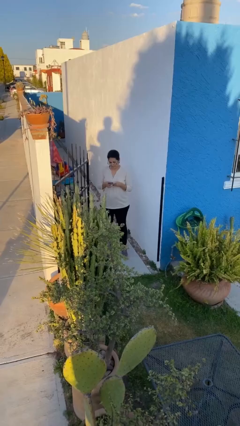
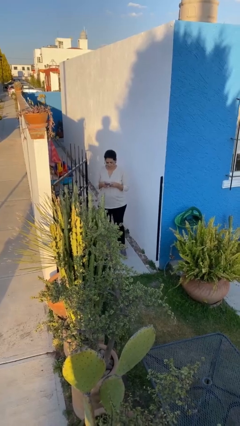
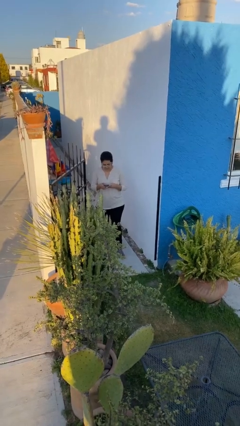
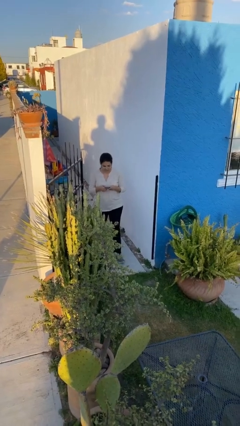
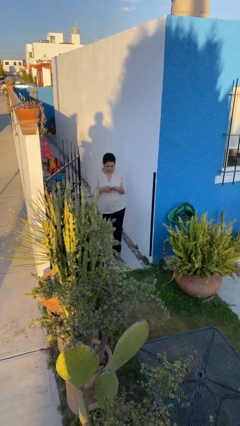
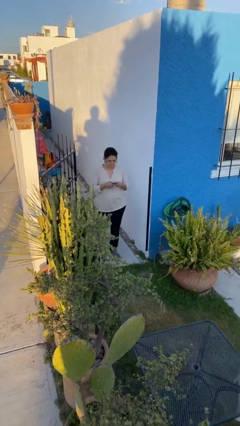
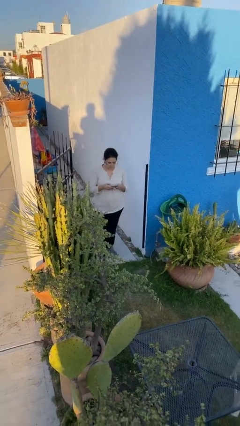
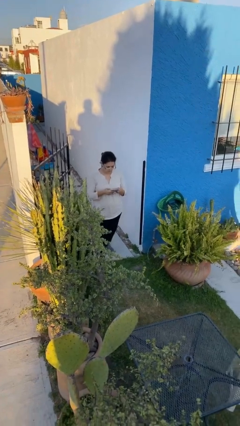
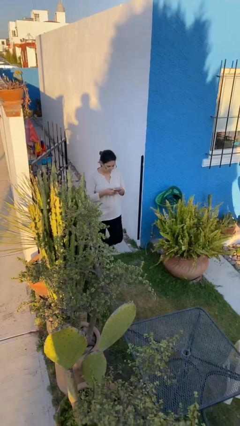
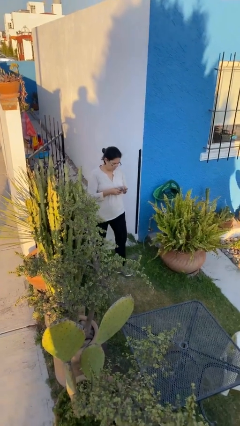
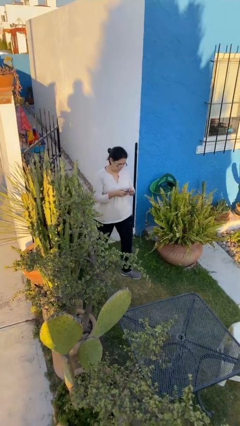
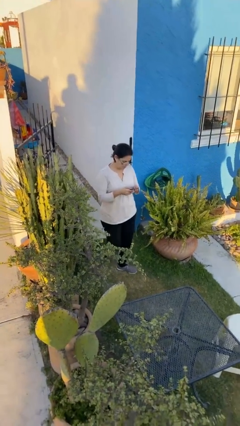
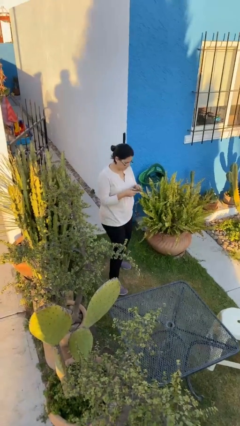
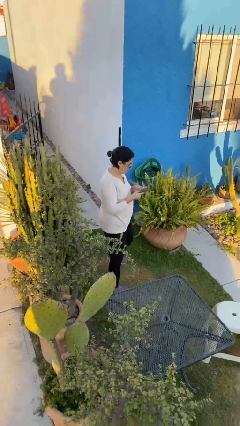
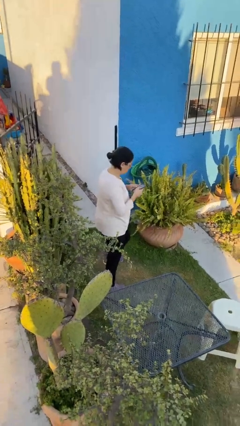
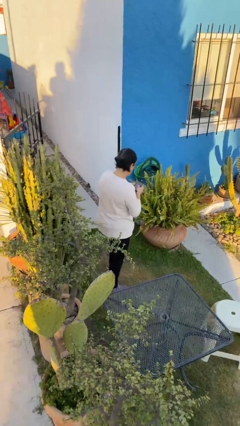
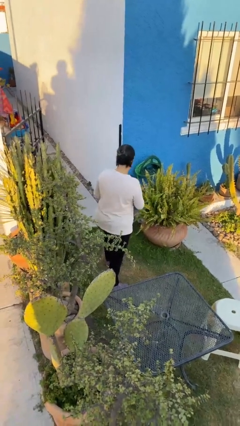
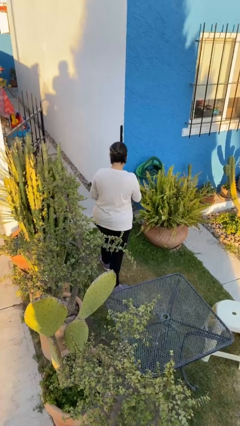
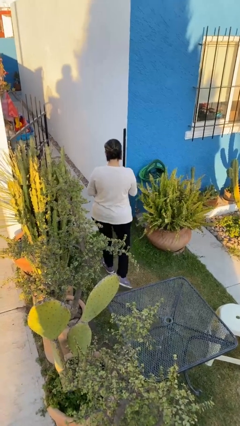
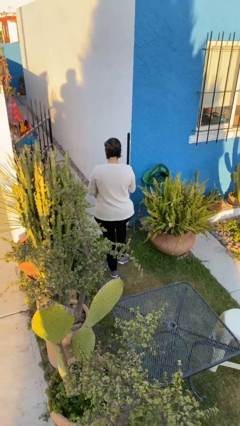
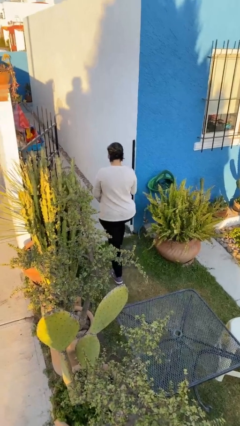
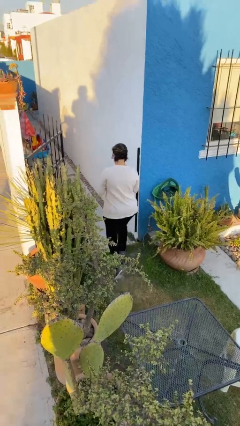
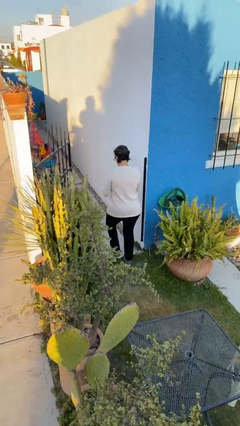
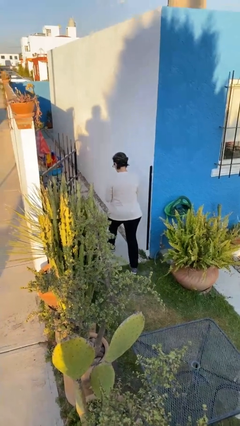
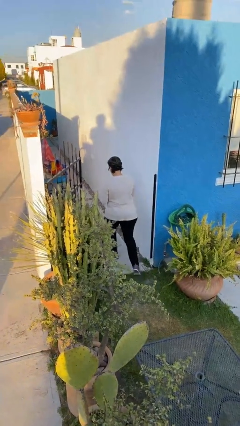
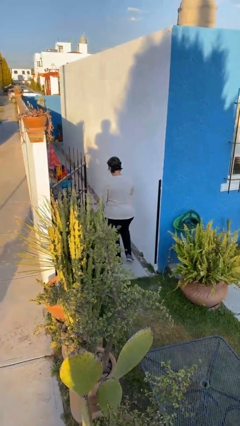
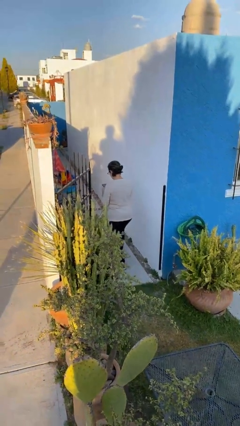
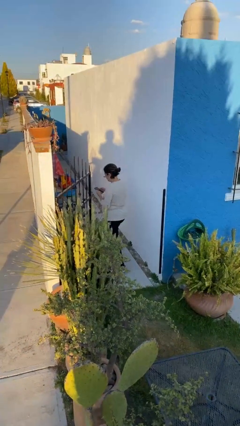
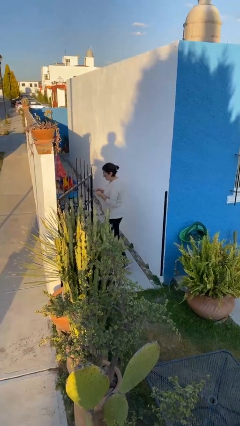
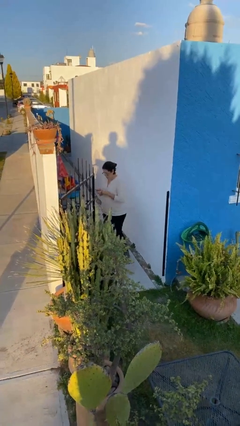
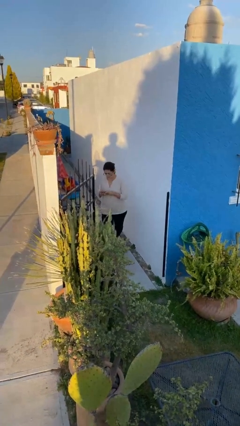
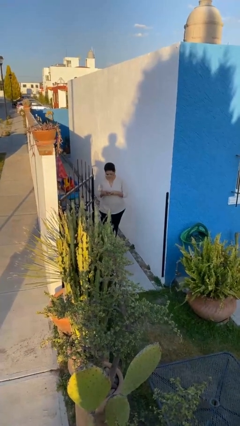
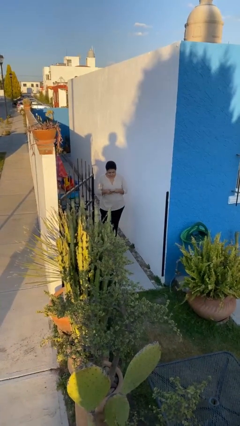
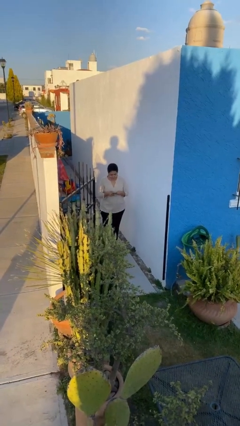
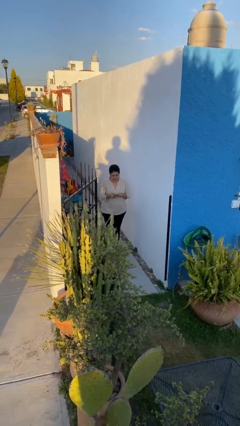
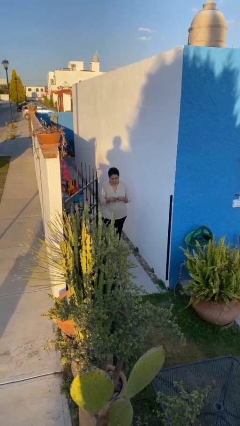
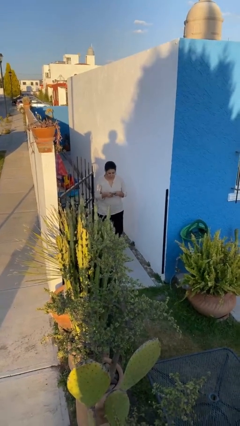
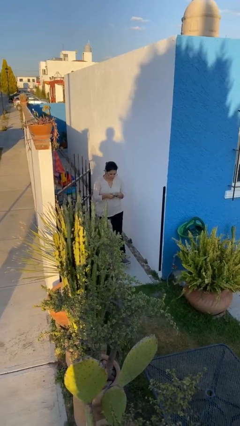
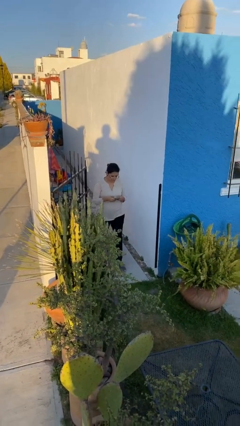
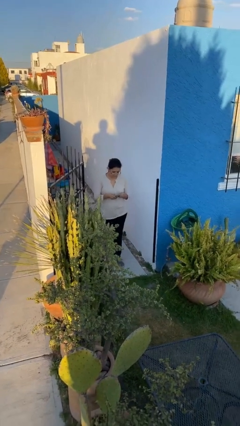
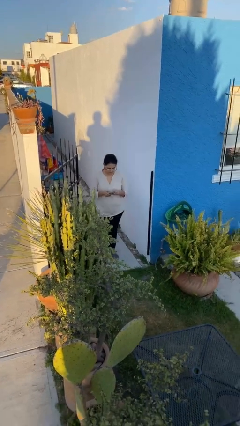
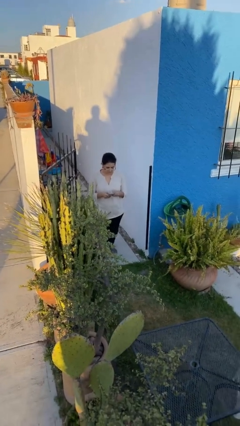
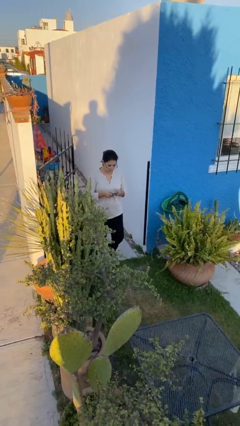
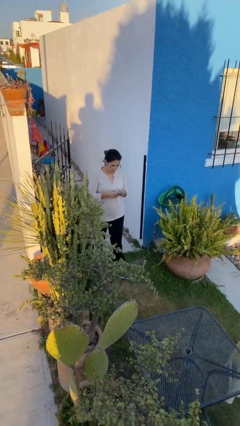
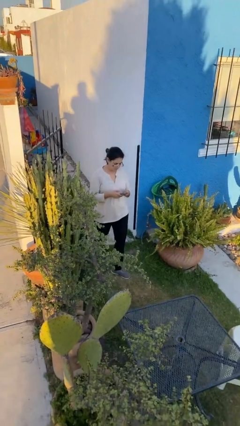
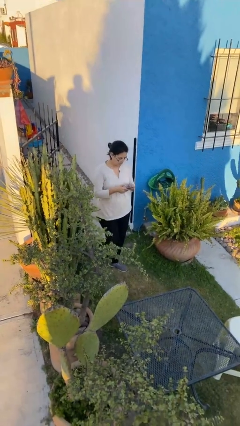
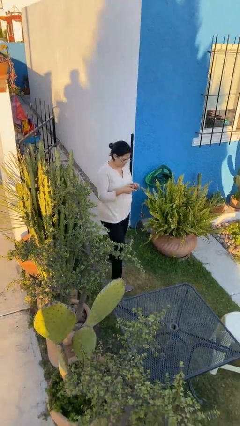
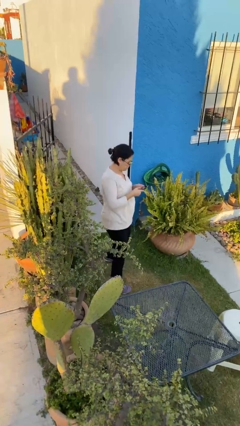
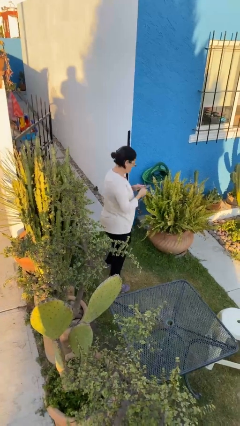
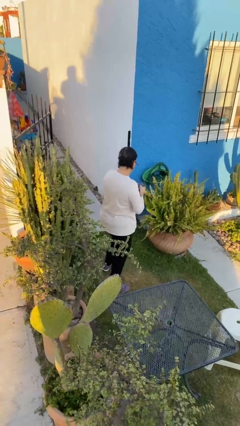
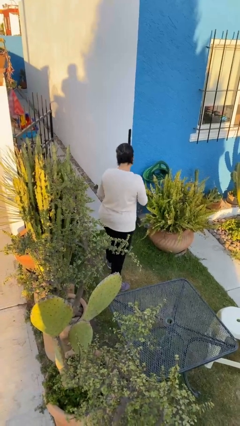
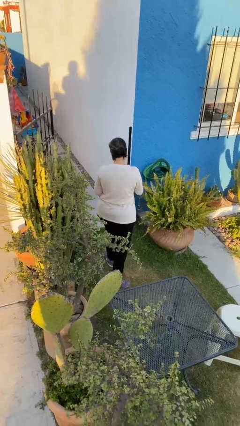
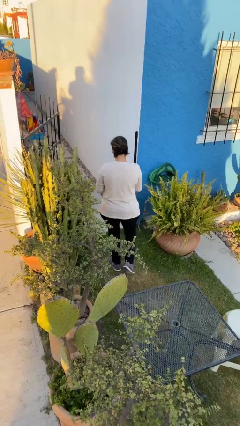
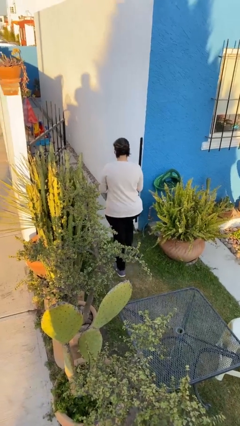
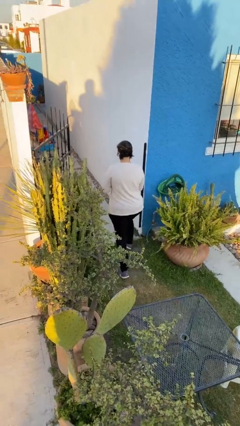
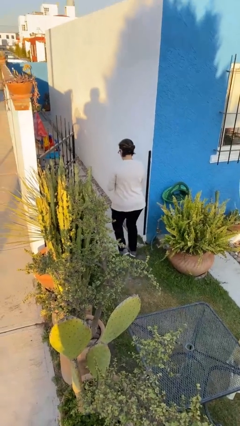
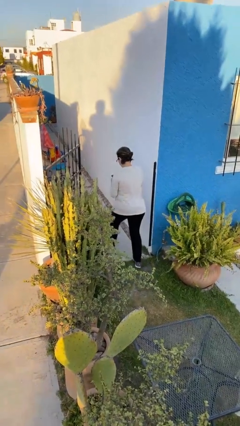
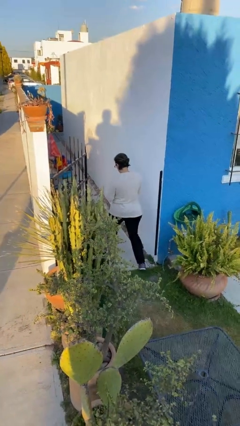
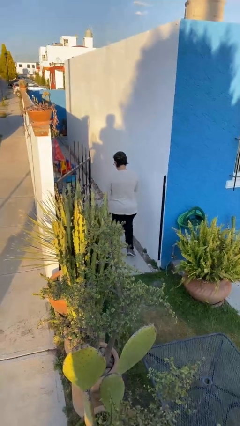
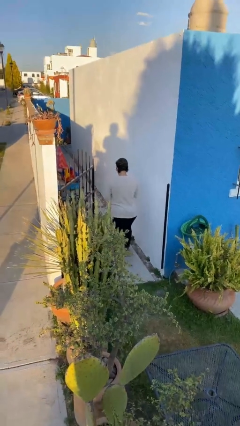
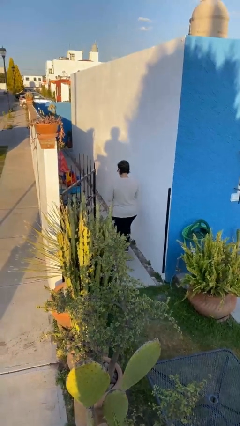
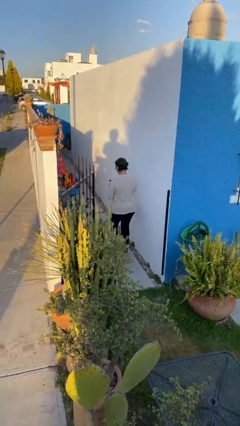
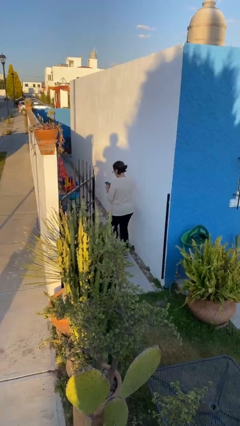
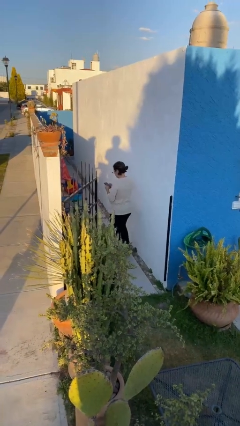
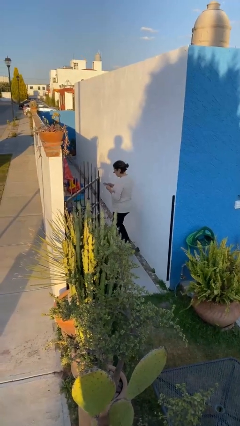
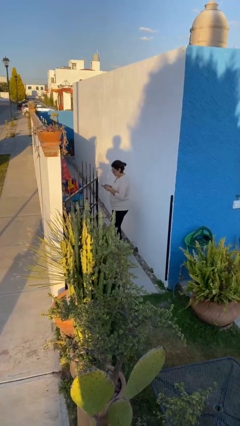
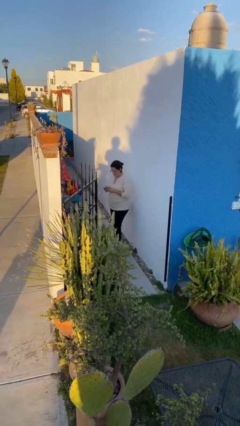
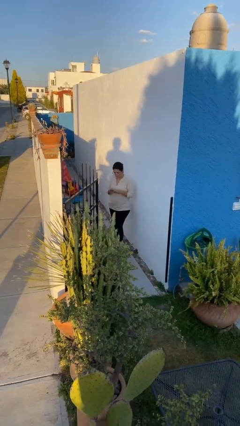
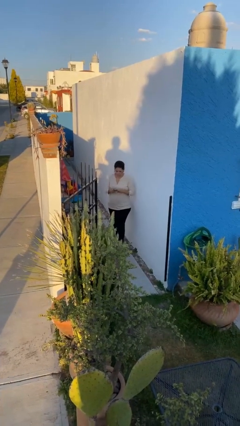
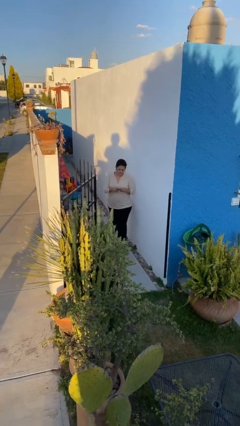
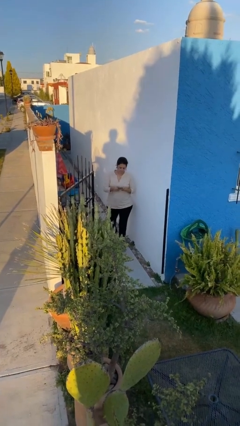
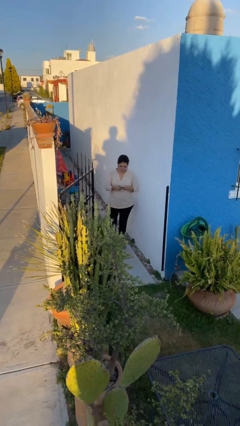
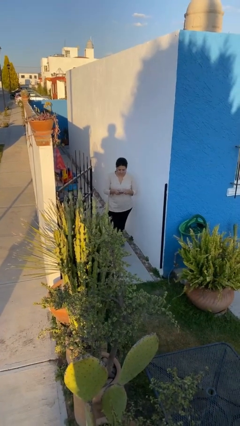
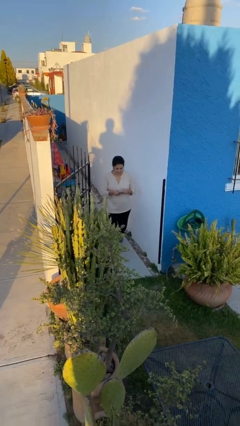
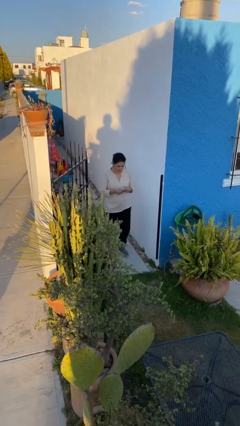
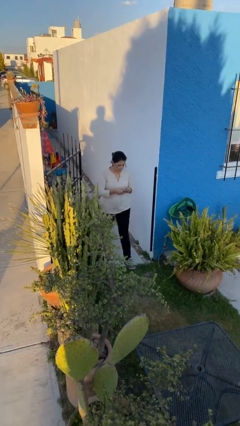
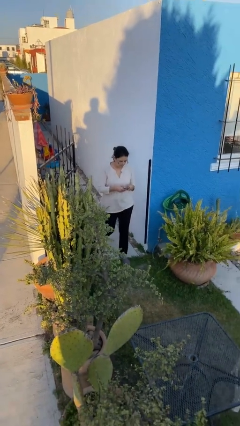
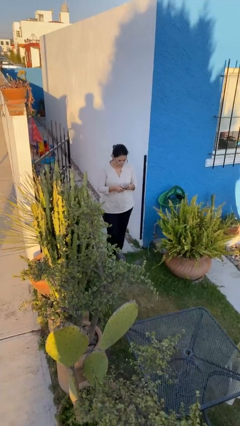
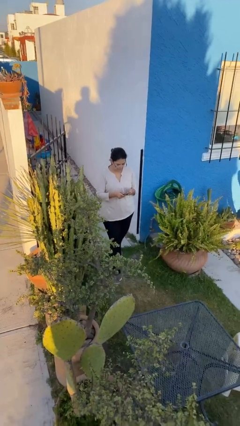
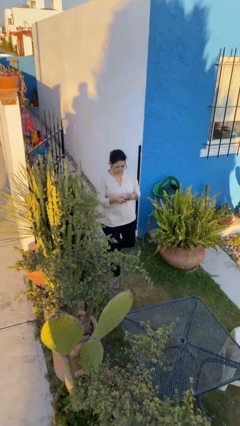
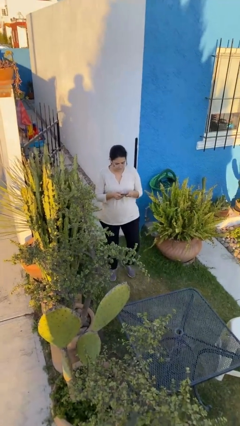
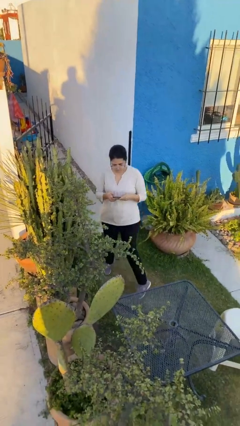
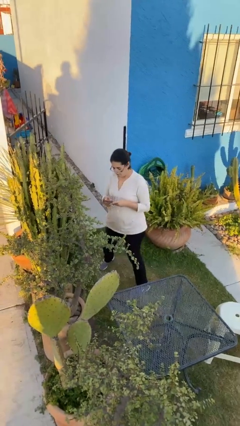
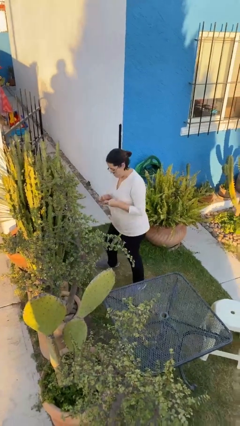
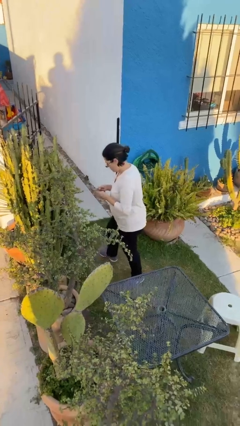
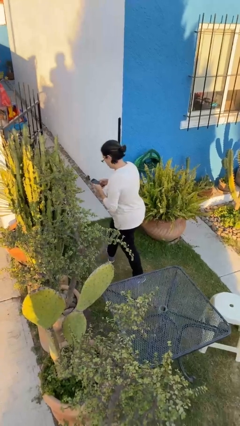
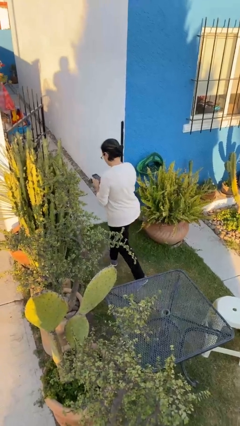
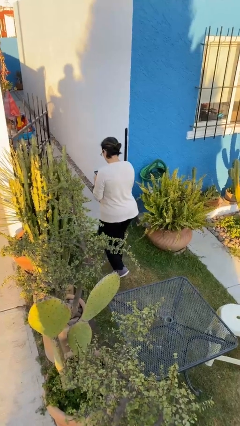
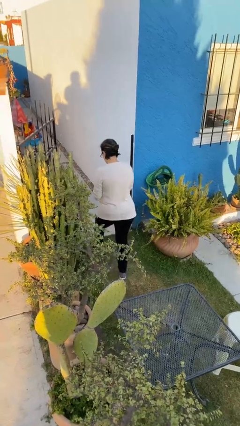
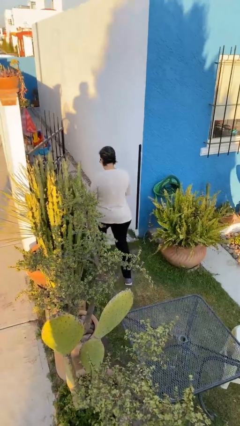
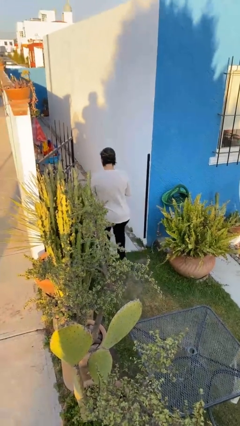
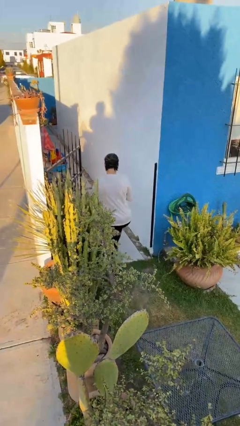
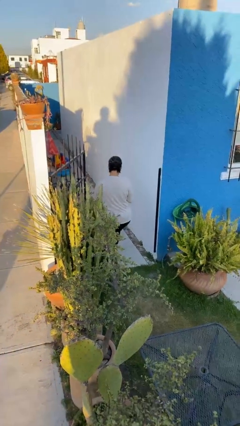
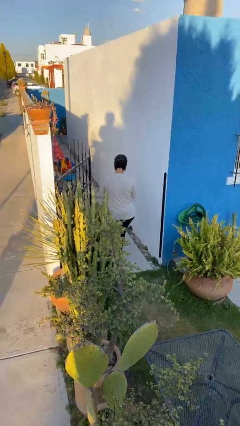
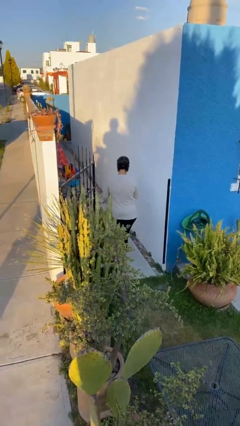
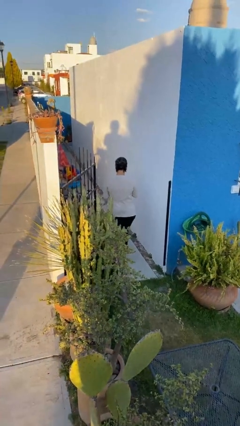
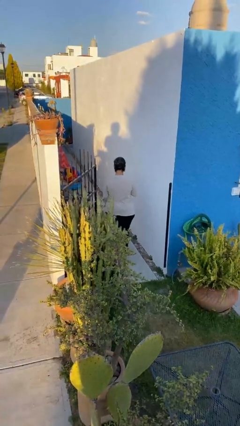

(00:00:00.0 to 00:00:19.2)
person texts on phone
